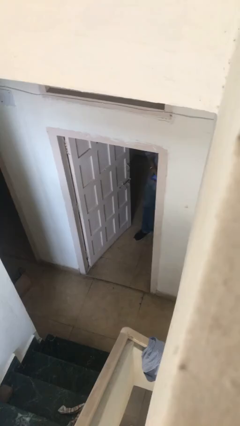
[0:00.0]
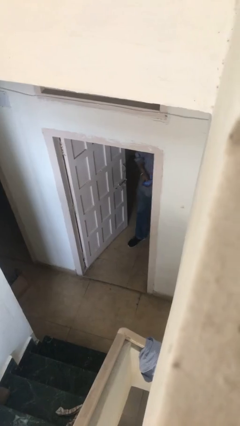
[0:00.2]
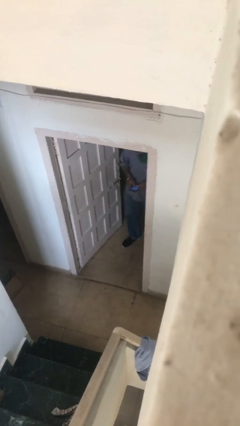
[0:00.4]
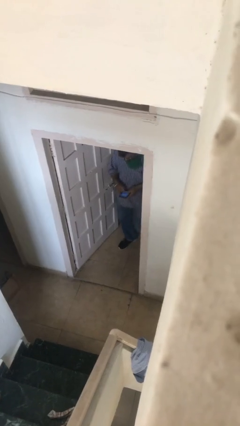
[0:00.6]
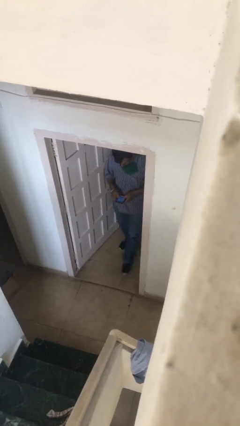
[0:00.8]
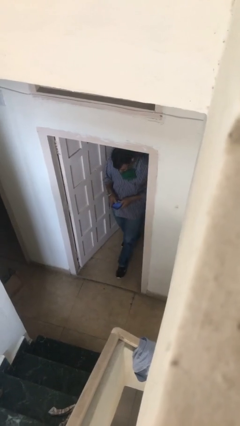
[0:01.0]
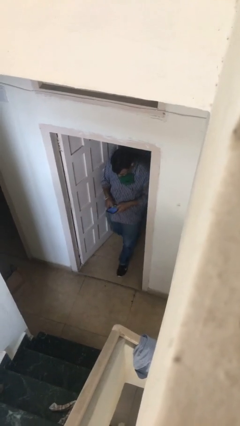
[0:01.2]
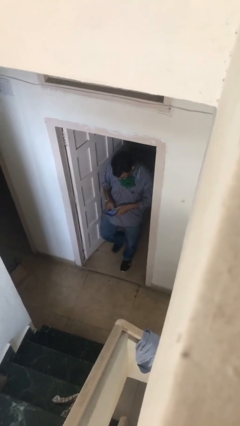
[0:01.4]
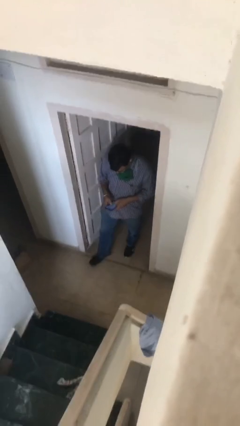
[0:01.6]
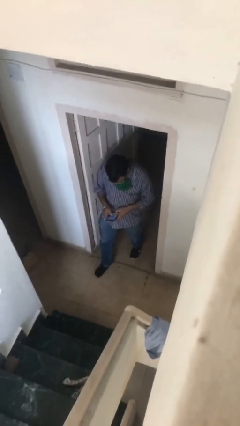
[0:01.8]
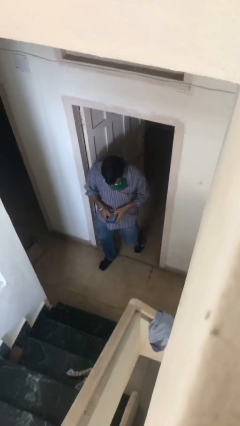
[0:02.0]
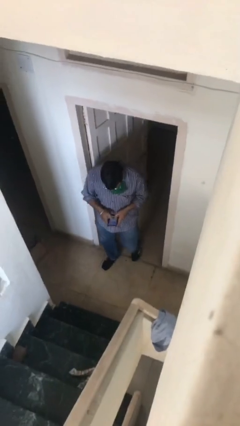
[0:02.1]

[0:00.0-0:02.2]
person enters scene through structure

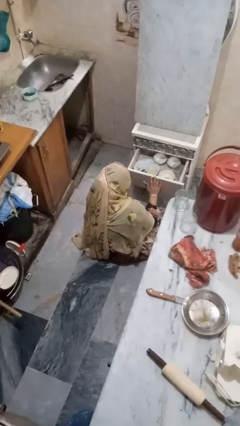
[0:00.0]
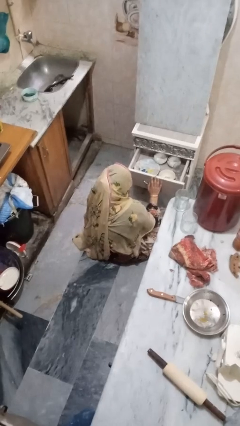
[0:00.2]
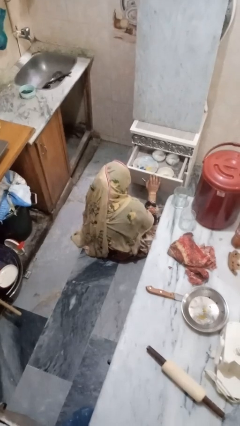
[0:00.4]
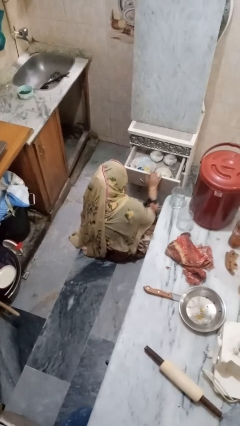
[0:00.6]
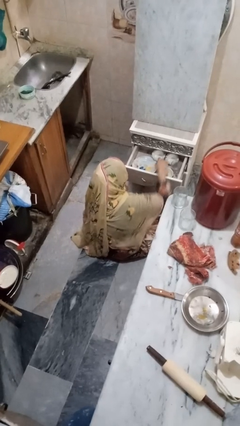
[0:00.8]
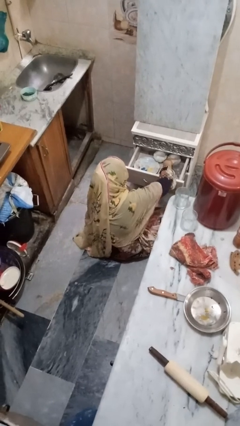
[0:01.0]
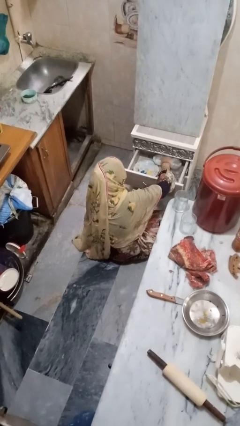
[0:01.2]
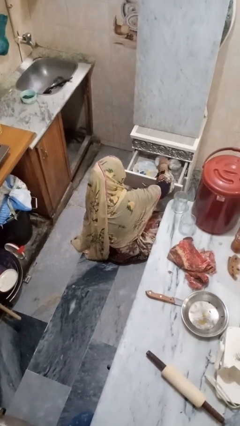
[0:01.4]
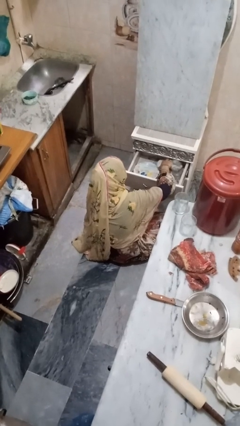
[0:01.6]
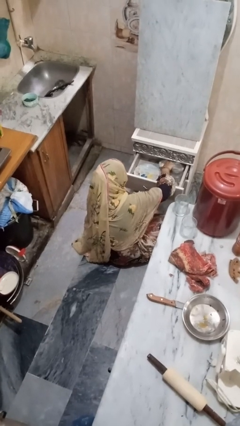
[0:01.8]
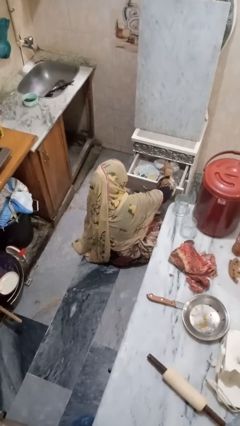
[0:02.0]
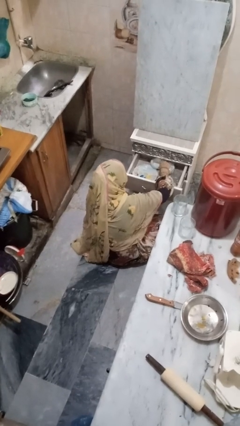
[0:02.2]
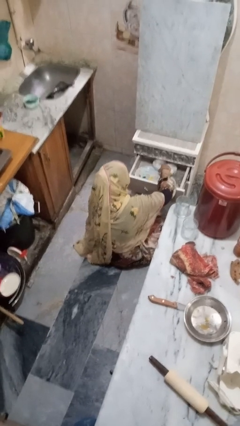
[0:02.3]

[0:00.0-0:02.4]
person searches in kitchen drawer

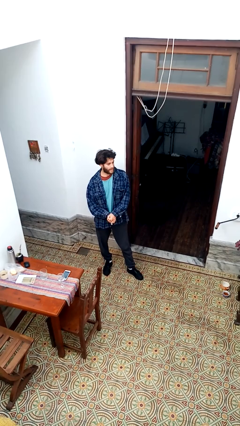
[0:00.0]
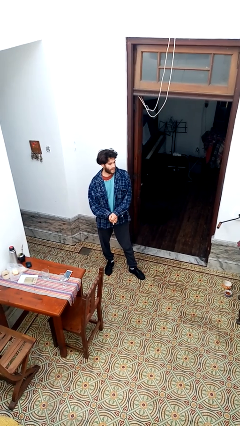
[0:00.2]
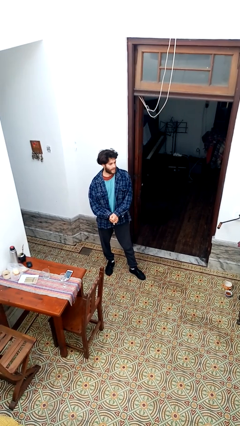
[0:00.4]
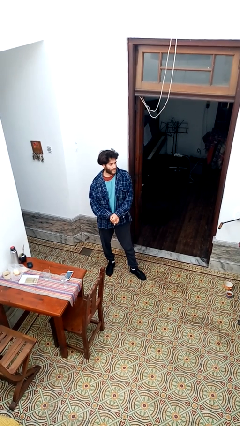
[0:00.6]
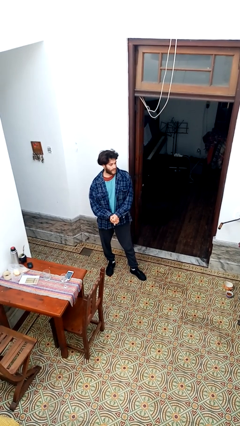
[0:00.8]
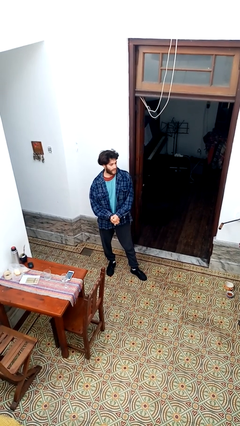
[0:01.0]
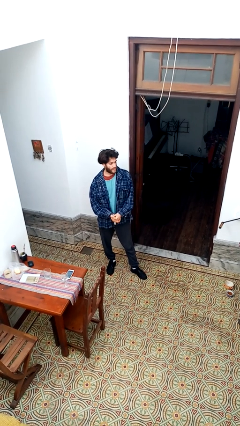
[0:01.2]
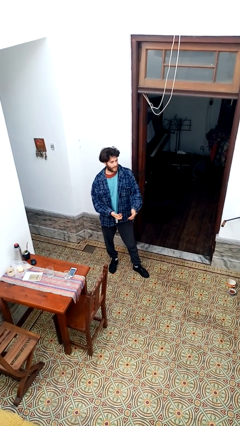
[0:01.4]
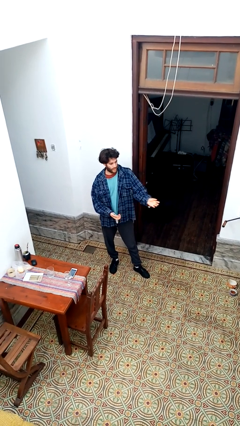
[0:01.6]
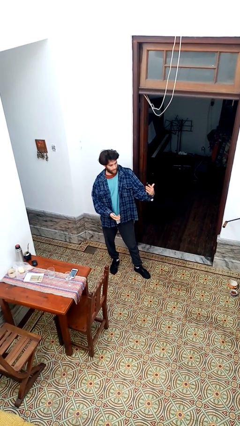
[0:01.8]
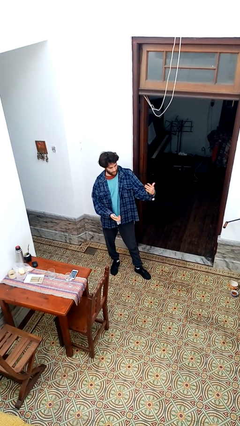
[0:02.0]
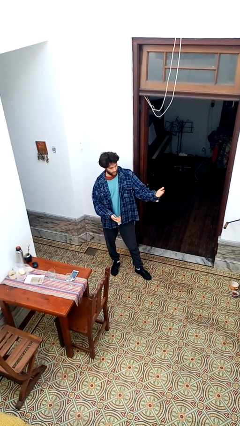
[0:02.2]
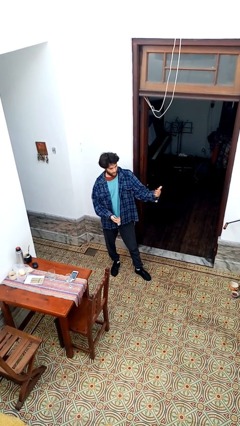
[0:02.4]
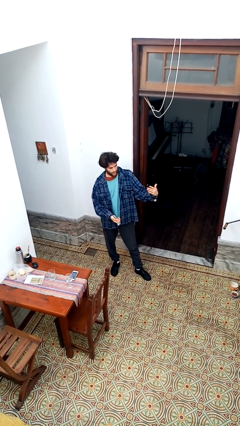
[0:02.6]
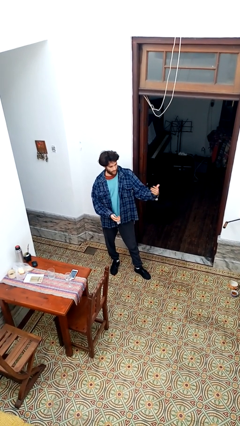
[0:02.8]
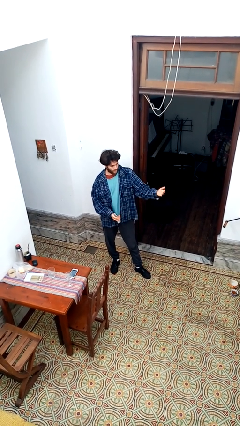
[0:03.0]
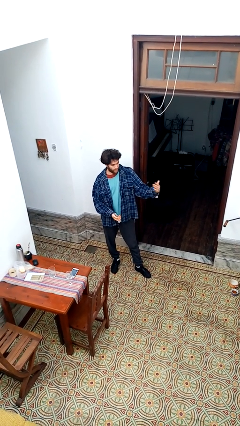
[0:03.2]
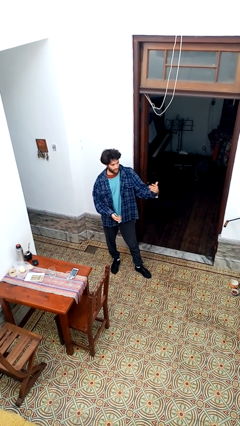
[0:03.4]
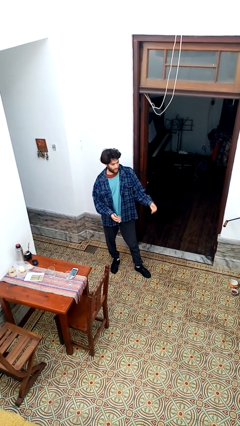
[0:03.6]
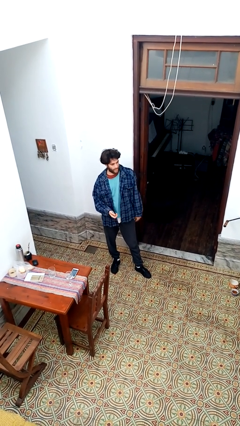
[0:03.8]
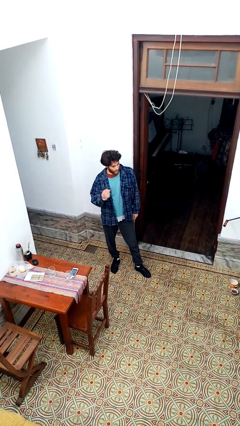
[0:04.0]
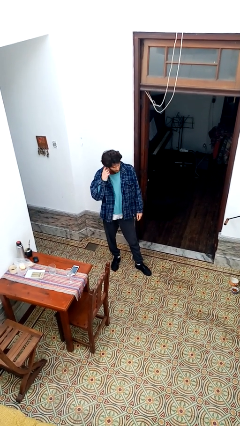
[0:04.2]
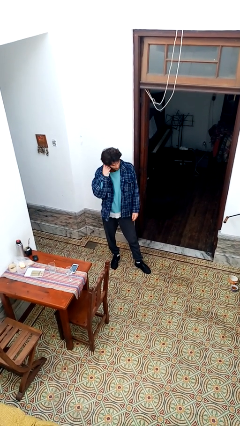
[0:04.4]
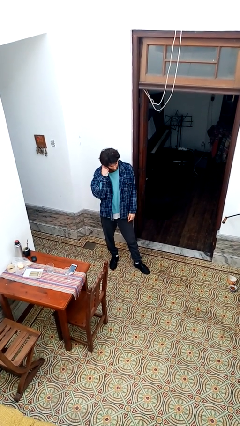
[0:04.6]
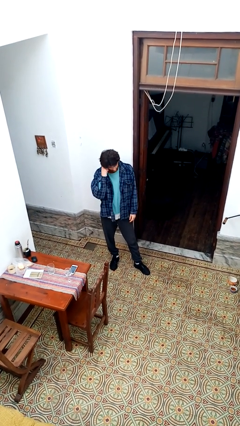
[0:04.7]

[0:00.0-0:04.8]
person gestures come here

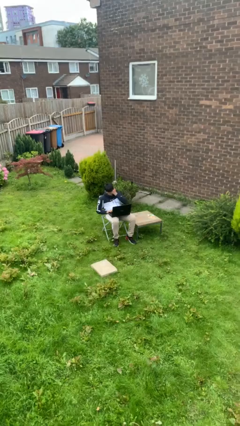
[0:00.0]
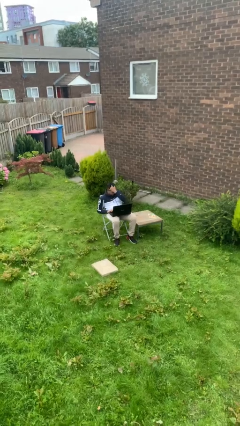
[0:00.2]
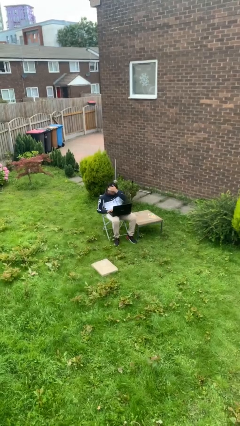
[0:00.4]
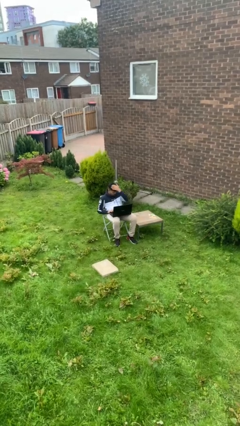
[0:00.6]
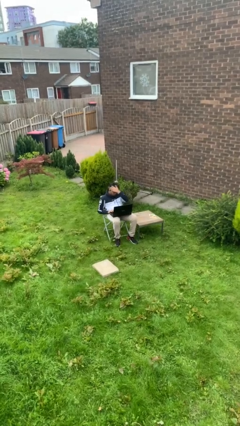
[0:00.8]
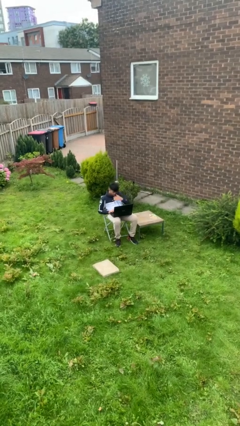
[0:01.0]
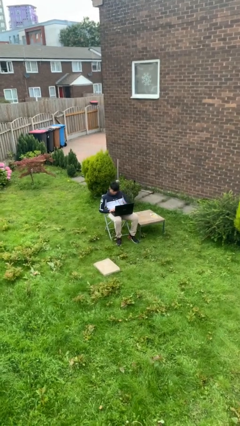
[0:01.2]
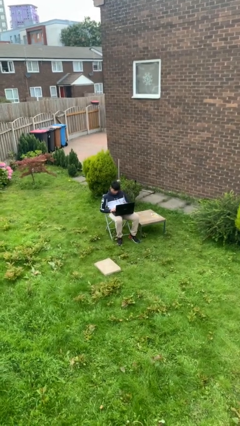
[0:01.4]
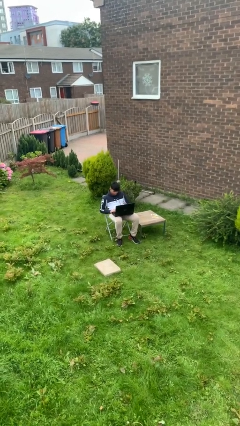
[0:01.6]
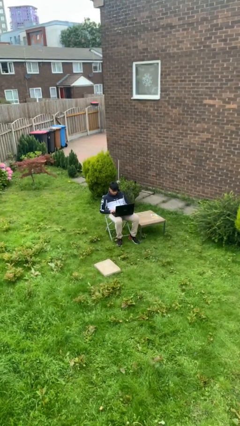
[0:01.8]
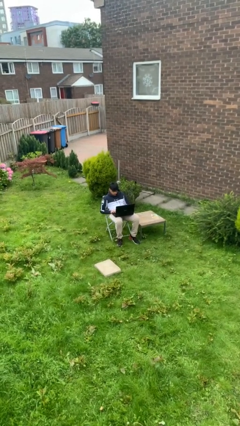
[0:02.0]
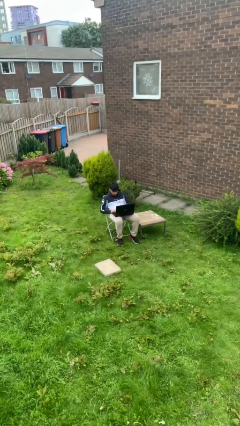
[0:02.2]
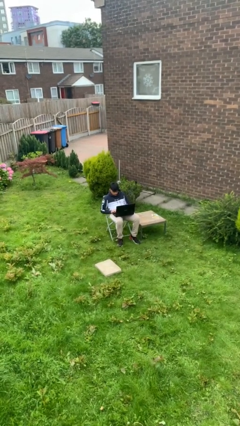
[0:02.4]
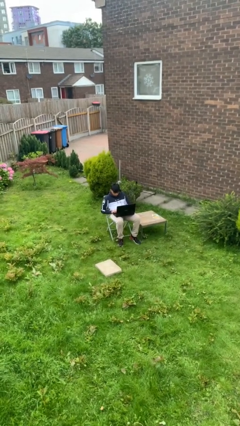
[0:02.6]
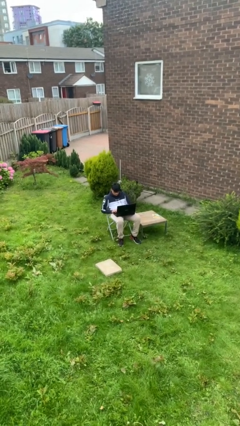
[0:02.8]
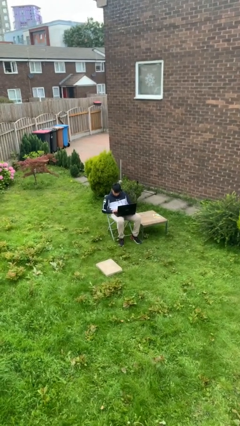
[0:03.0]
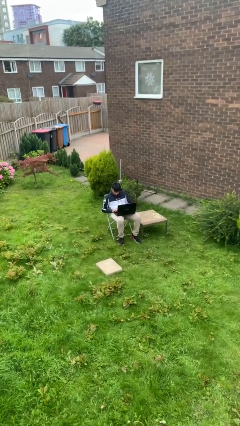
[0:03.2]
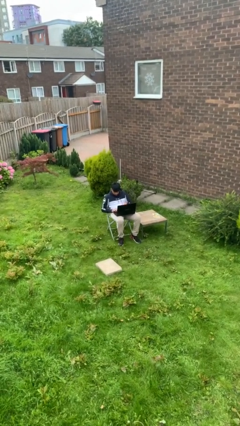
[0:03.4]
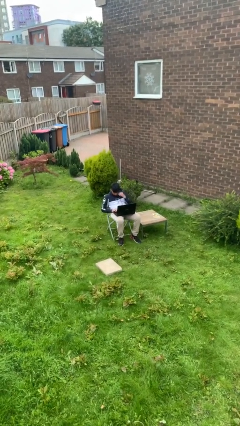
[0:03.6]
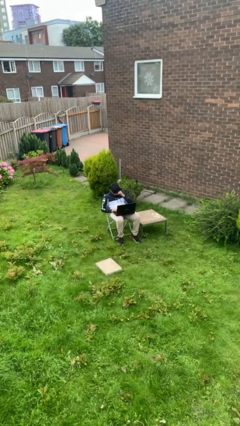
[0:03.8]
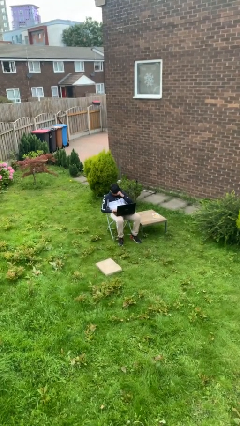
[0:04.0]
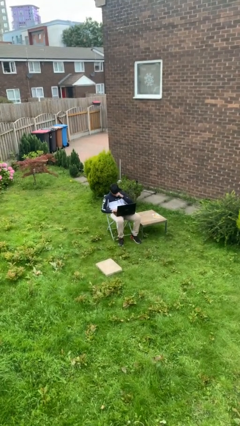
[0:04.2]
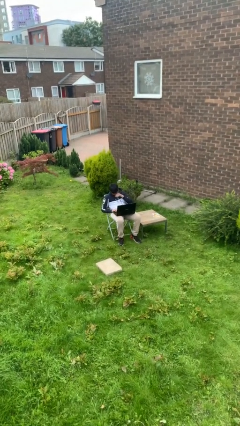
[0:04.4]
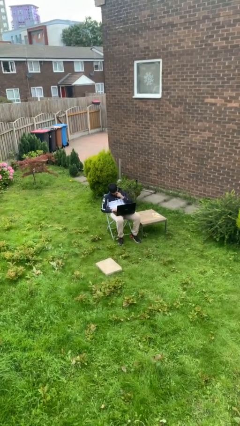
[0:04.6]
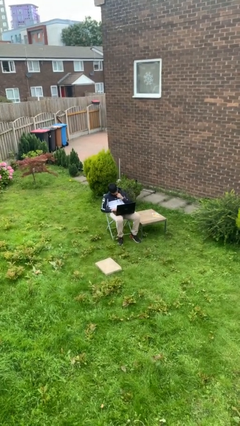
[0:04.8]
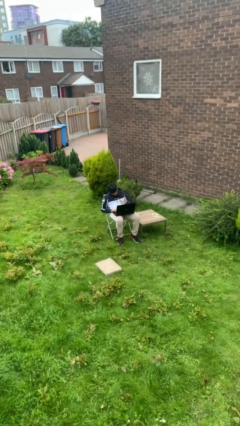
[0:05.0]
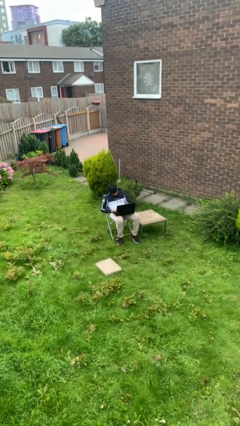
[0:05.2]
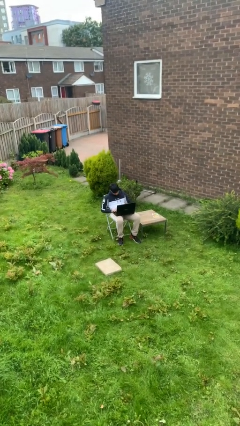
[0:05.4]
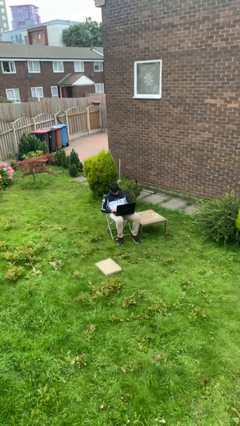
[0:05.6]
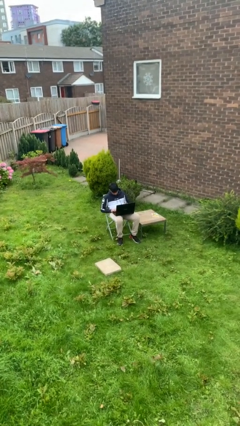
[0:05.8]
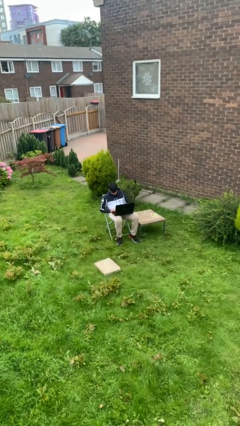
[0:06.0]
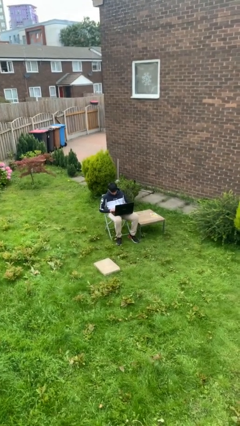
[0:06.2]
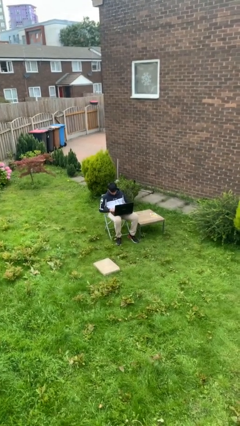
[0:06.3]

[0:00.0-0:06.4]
person interacts with laptop

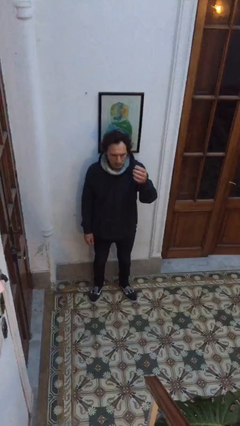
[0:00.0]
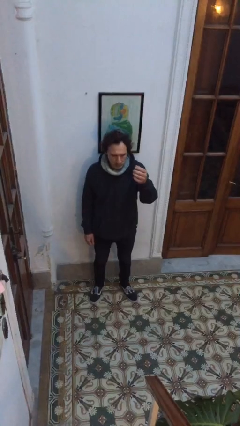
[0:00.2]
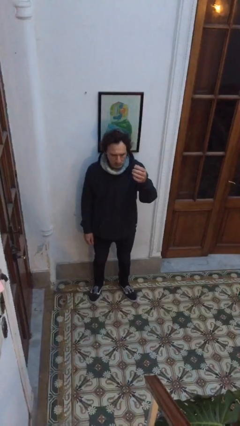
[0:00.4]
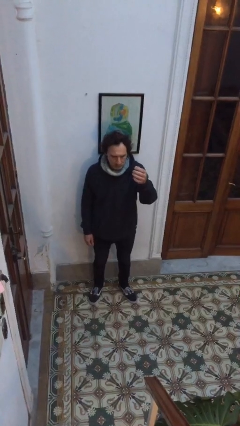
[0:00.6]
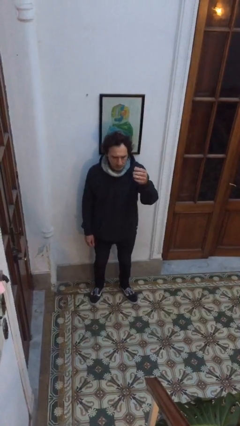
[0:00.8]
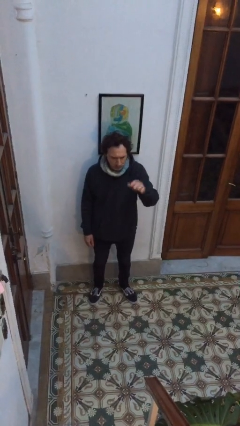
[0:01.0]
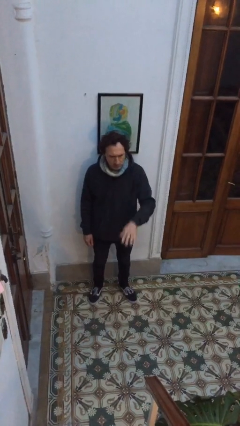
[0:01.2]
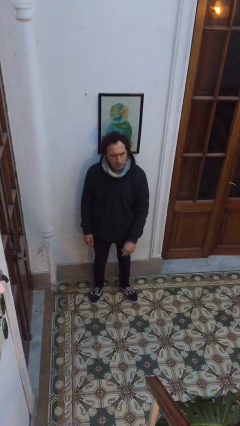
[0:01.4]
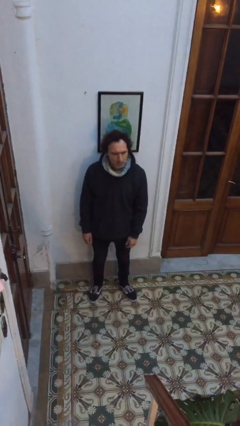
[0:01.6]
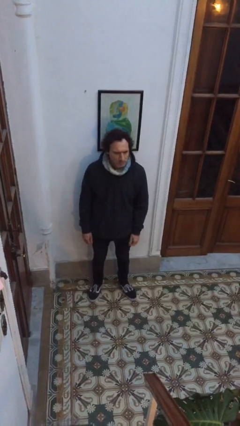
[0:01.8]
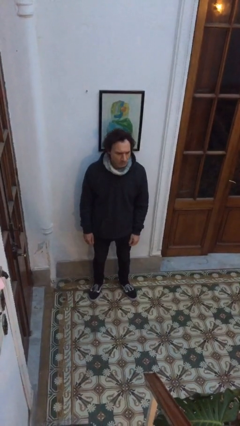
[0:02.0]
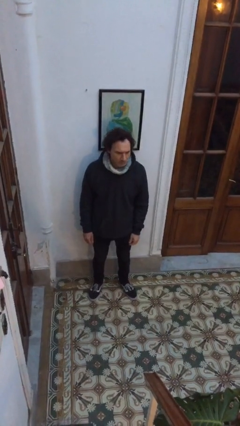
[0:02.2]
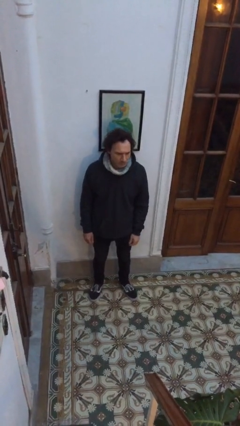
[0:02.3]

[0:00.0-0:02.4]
person gestures swipe down
